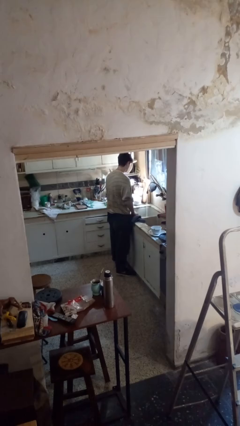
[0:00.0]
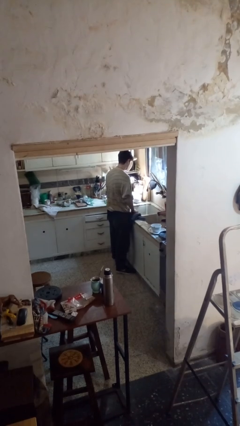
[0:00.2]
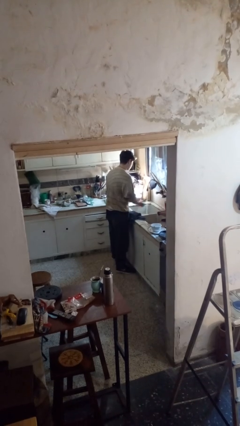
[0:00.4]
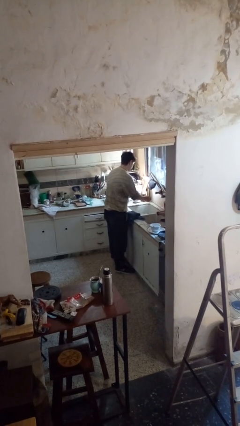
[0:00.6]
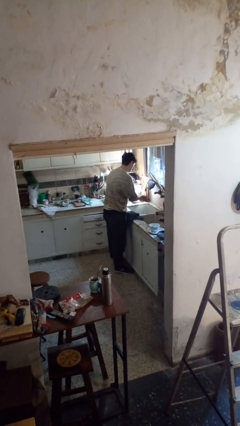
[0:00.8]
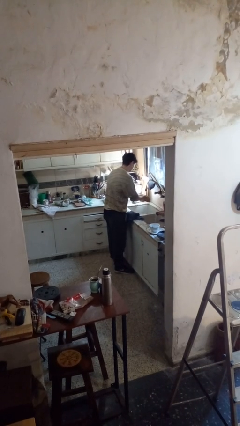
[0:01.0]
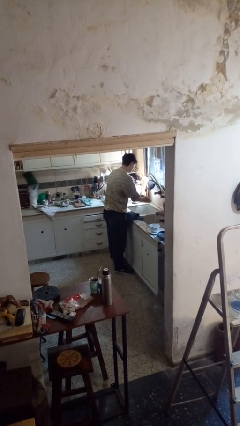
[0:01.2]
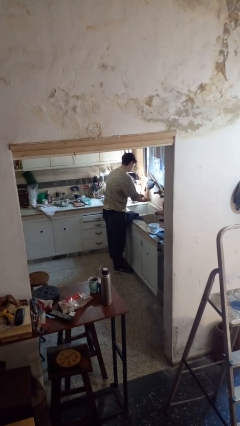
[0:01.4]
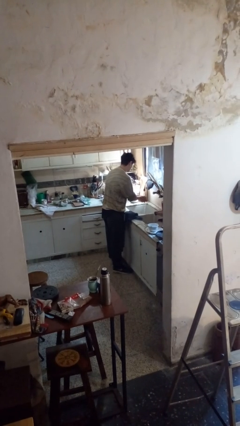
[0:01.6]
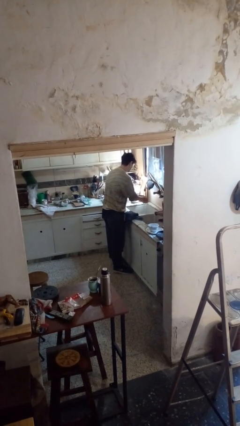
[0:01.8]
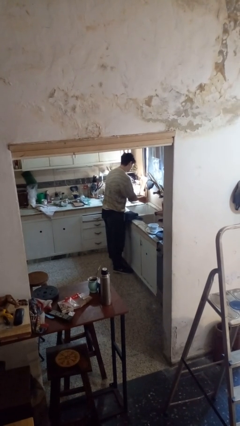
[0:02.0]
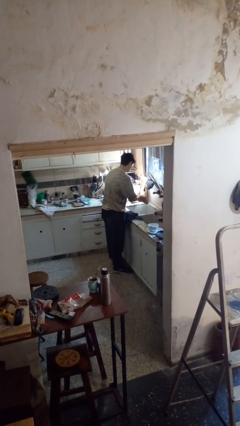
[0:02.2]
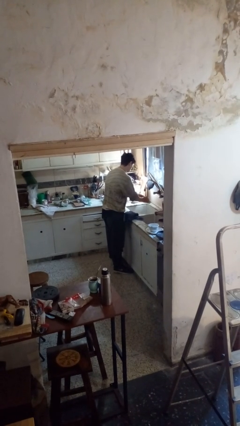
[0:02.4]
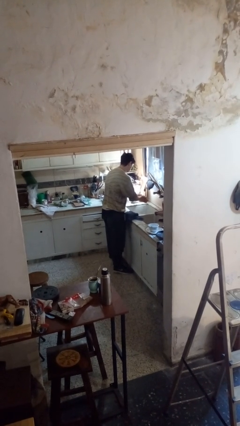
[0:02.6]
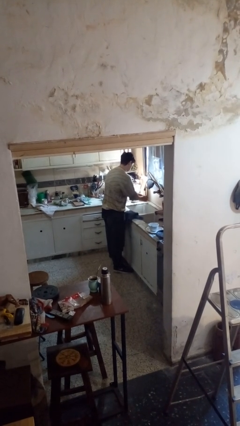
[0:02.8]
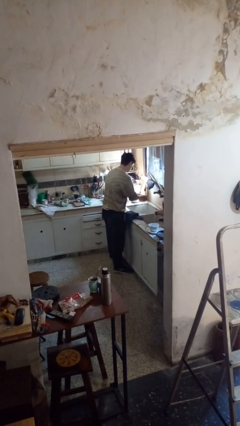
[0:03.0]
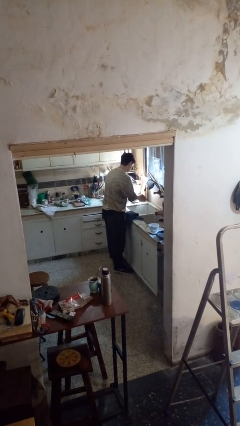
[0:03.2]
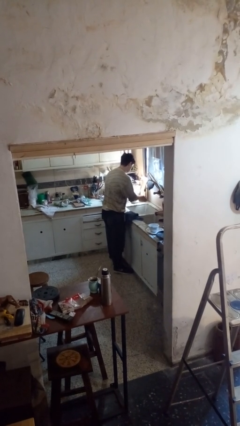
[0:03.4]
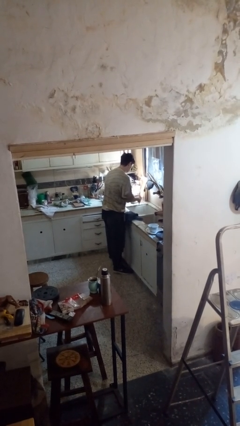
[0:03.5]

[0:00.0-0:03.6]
person washes hands

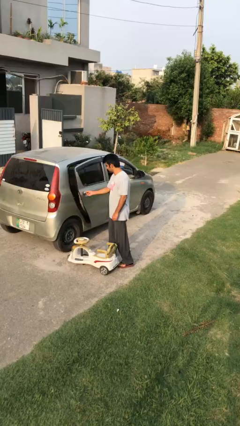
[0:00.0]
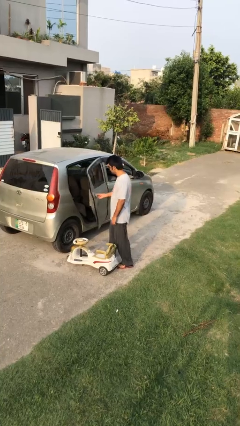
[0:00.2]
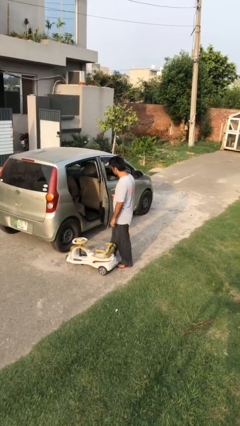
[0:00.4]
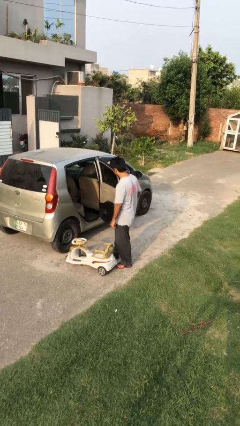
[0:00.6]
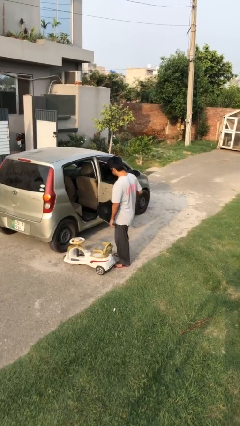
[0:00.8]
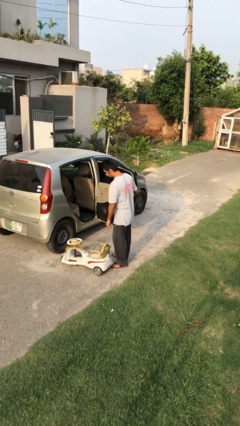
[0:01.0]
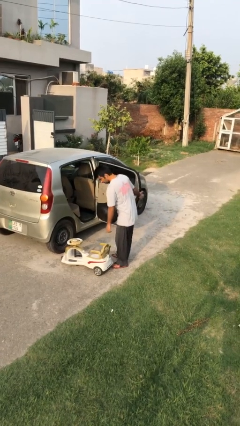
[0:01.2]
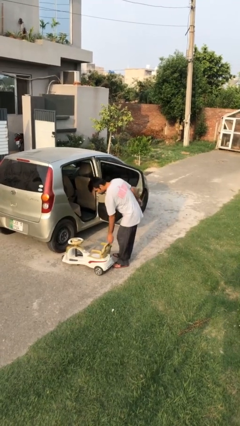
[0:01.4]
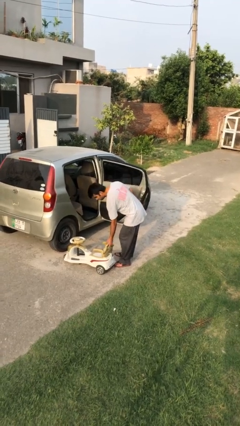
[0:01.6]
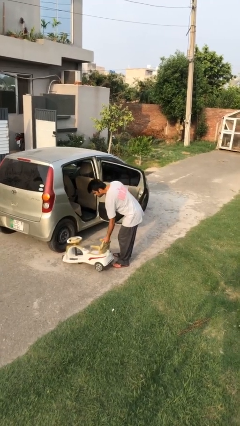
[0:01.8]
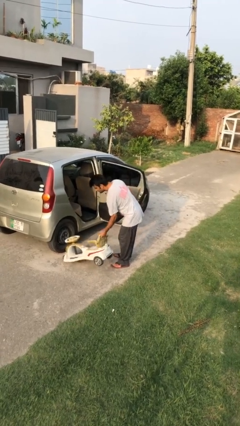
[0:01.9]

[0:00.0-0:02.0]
person opens car door

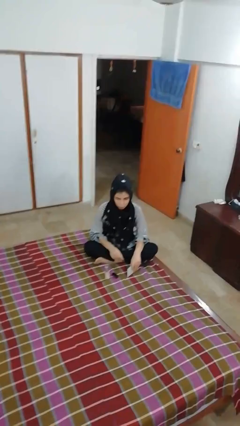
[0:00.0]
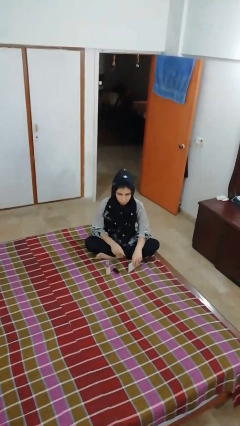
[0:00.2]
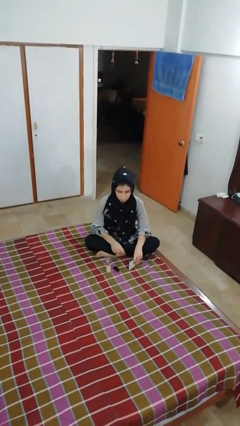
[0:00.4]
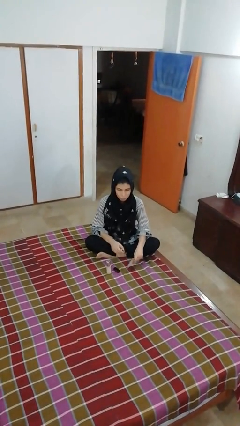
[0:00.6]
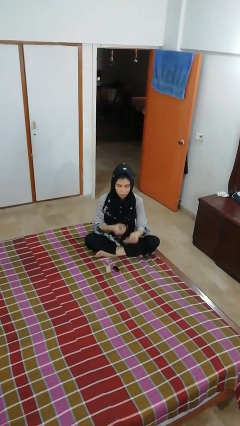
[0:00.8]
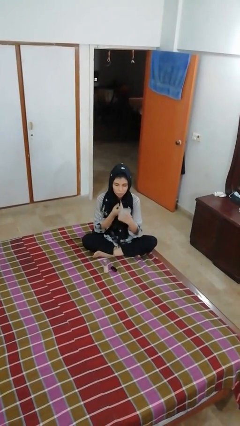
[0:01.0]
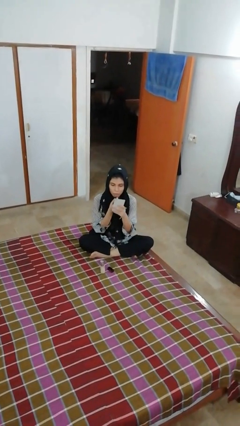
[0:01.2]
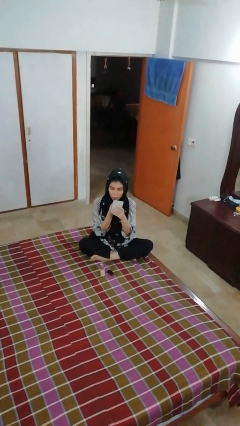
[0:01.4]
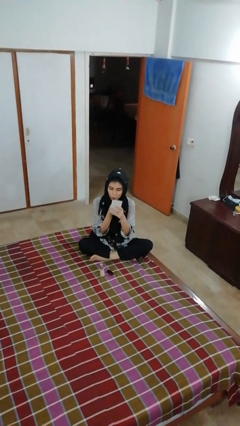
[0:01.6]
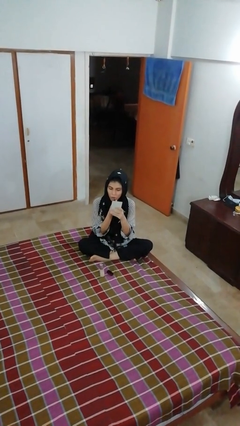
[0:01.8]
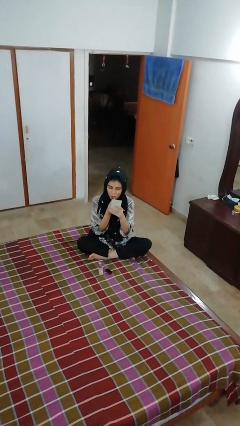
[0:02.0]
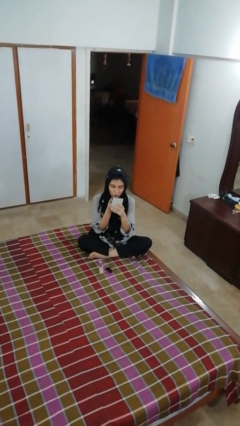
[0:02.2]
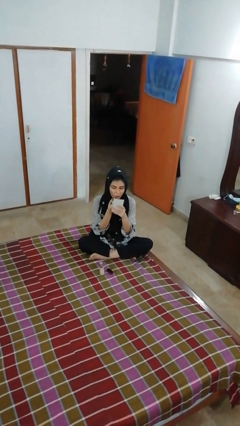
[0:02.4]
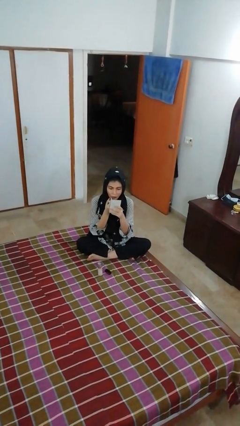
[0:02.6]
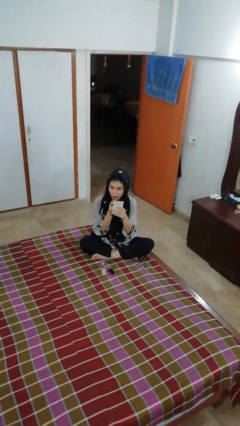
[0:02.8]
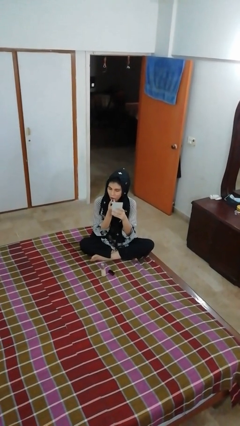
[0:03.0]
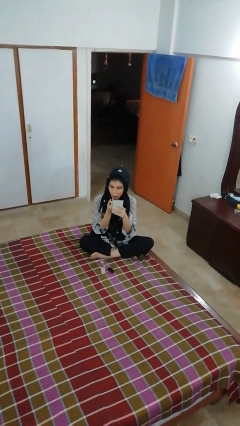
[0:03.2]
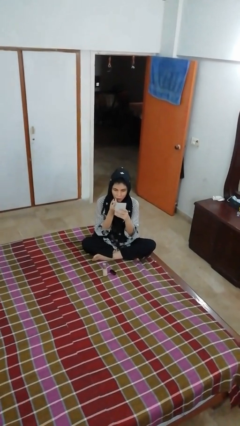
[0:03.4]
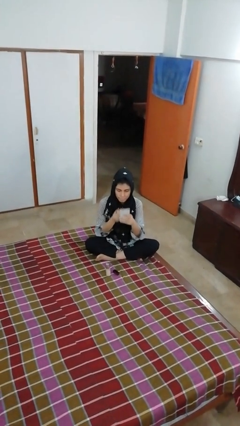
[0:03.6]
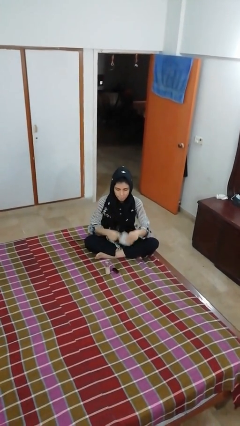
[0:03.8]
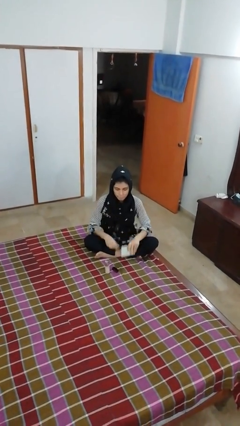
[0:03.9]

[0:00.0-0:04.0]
person applies lip makeup

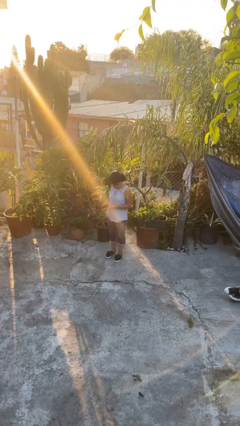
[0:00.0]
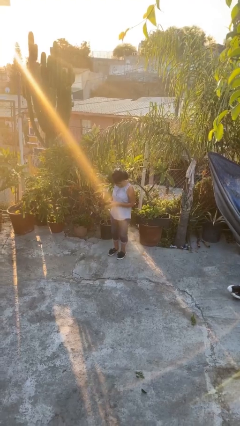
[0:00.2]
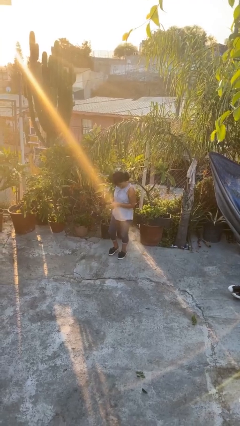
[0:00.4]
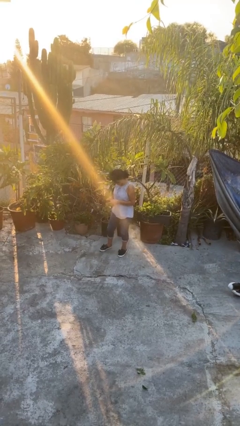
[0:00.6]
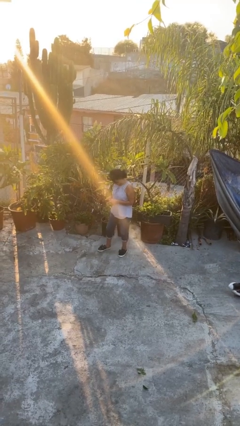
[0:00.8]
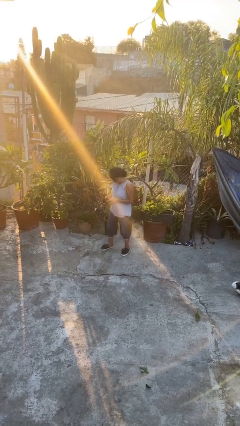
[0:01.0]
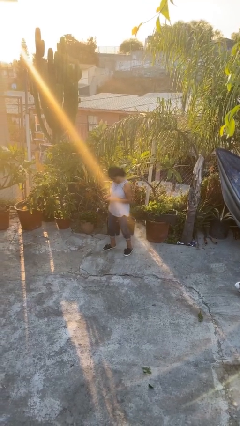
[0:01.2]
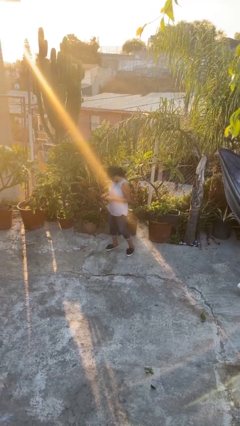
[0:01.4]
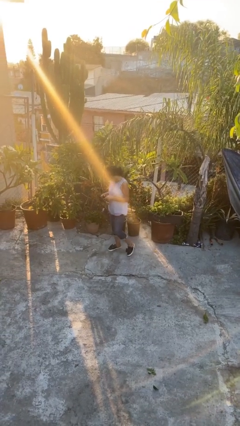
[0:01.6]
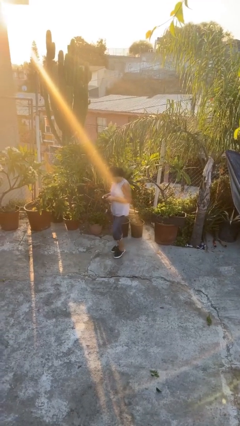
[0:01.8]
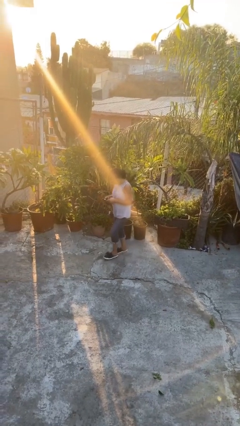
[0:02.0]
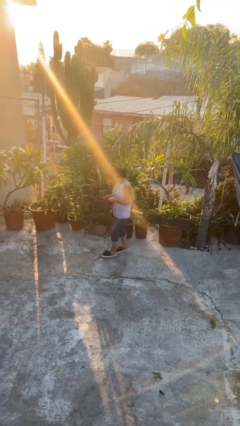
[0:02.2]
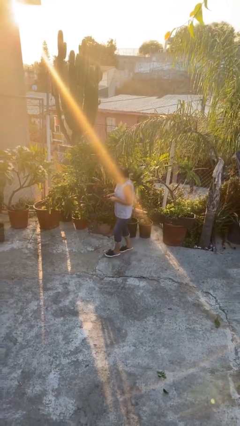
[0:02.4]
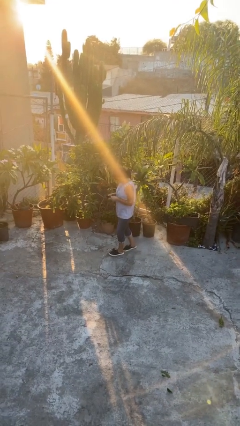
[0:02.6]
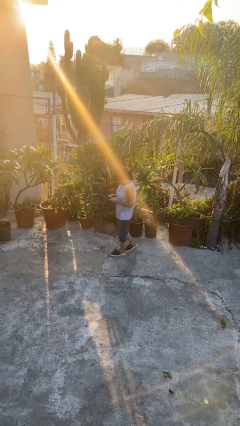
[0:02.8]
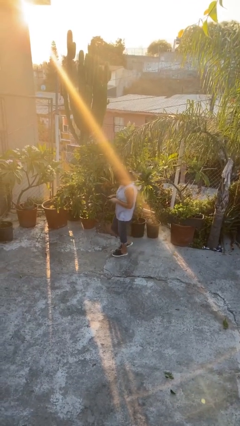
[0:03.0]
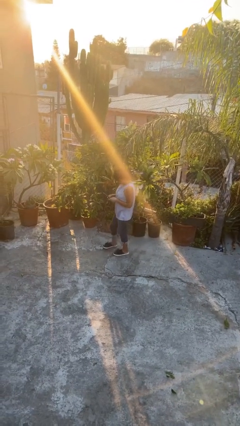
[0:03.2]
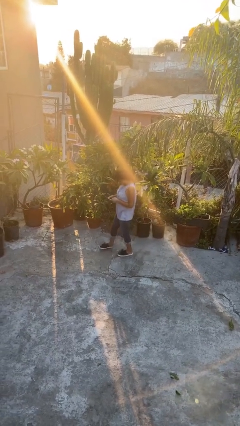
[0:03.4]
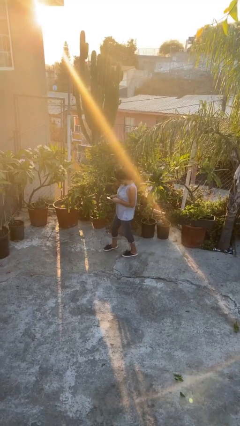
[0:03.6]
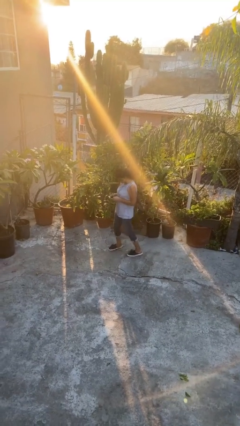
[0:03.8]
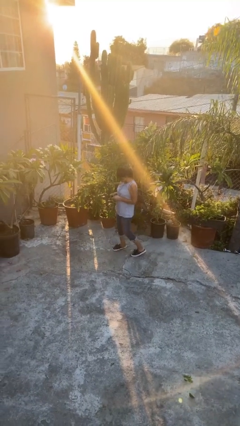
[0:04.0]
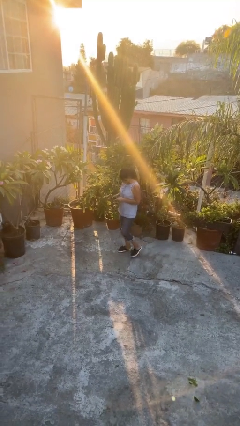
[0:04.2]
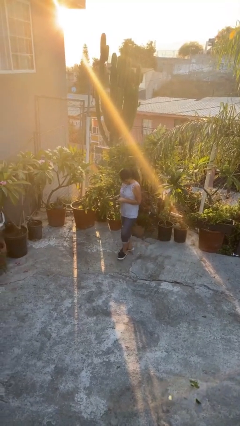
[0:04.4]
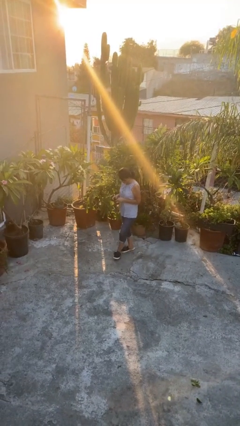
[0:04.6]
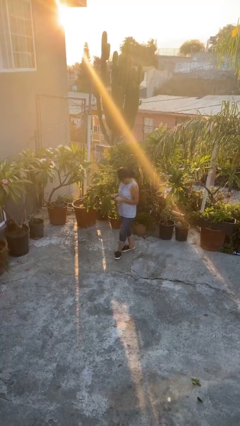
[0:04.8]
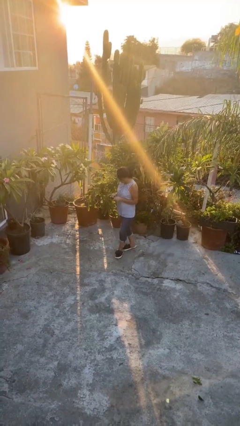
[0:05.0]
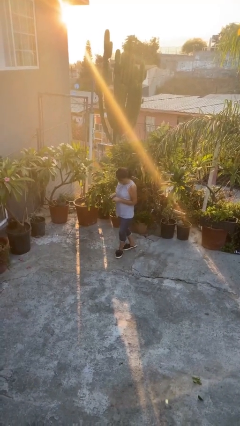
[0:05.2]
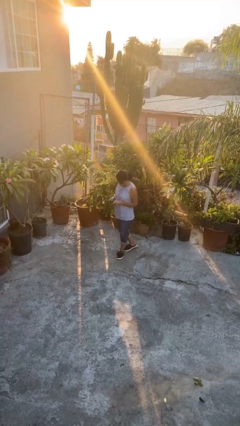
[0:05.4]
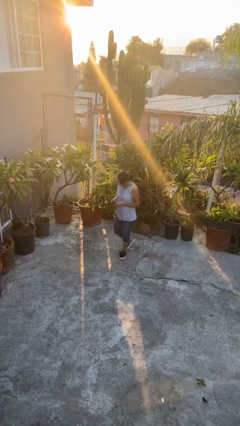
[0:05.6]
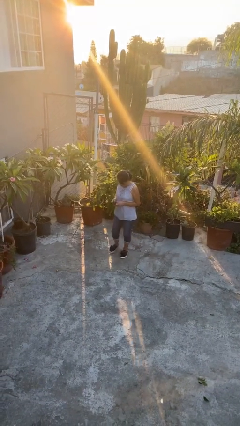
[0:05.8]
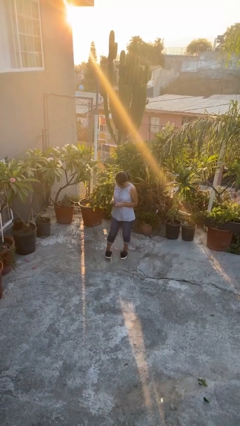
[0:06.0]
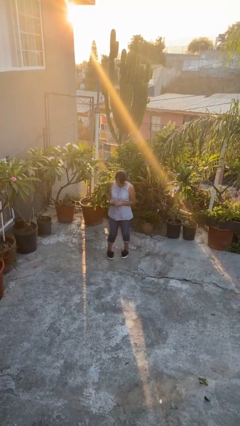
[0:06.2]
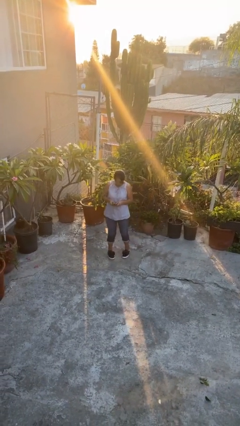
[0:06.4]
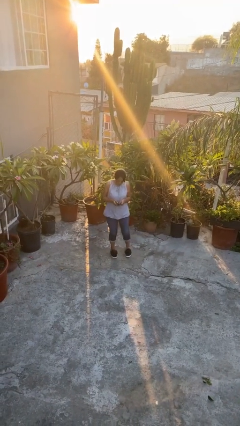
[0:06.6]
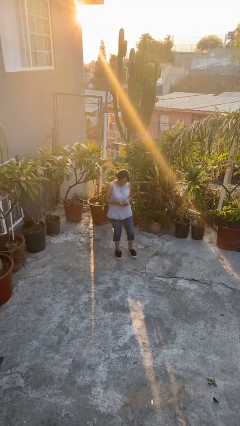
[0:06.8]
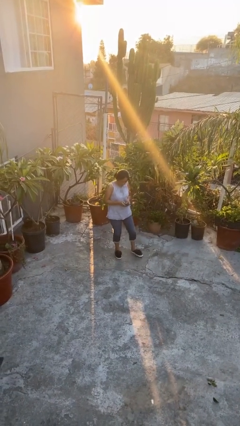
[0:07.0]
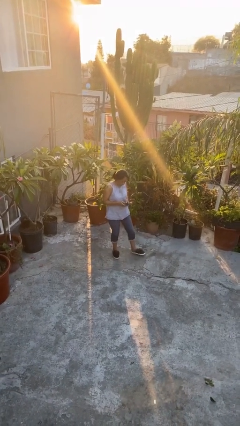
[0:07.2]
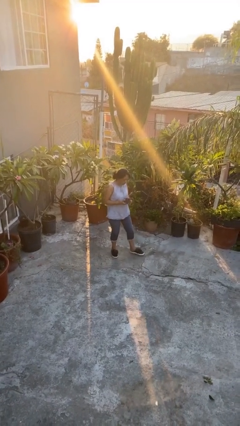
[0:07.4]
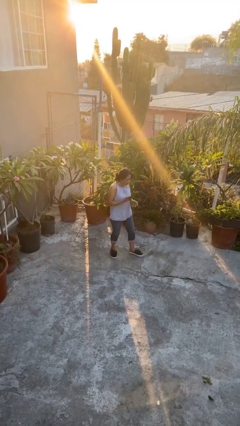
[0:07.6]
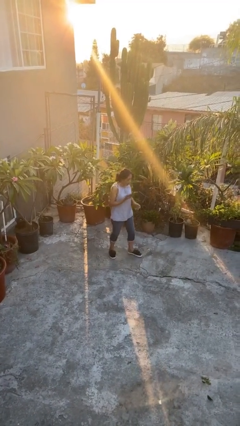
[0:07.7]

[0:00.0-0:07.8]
person texts on phone
